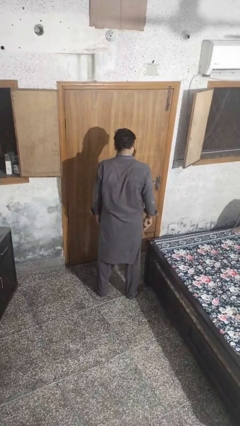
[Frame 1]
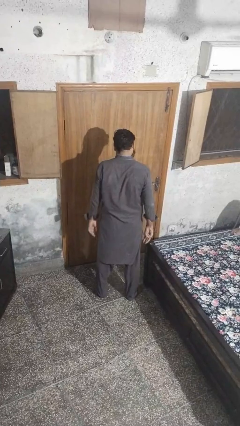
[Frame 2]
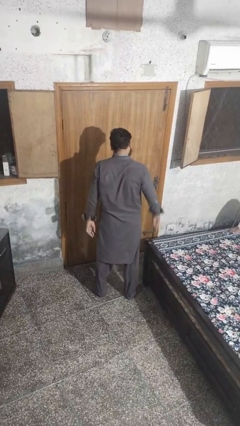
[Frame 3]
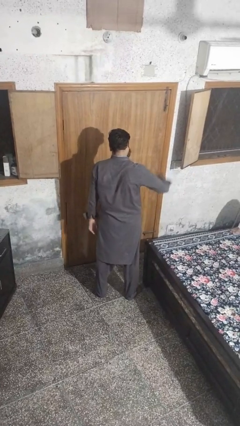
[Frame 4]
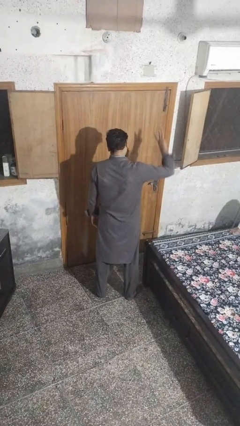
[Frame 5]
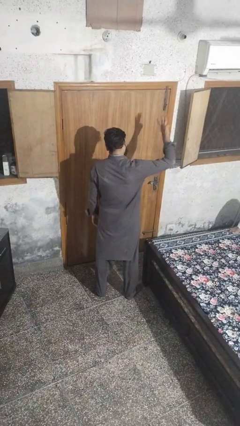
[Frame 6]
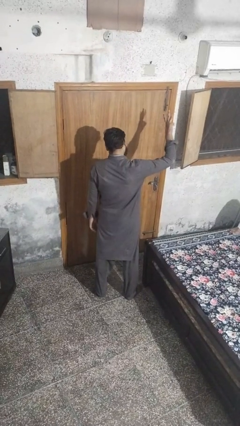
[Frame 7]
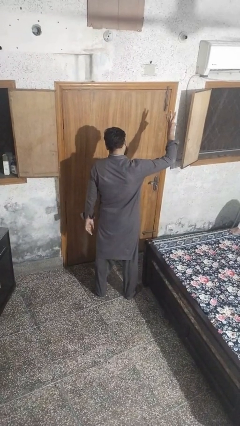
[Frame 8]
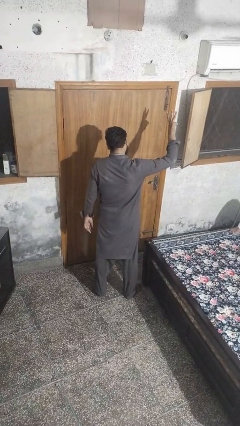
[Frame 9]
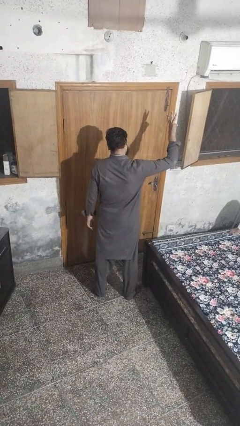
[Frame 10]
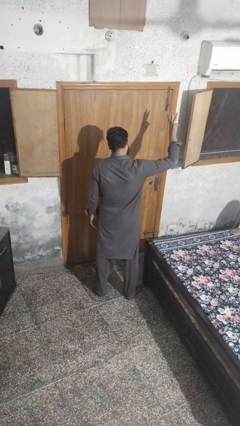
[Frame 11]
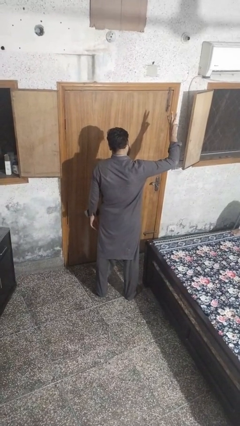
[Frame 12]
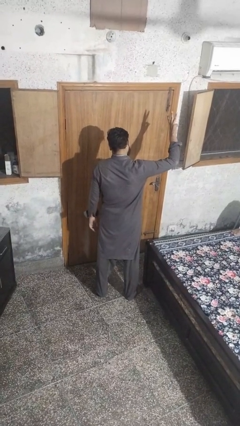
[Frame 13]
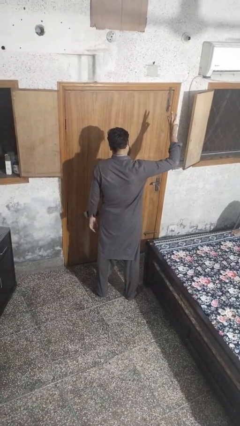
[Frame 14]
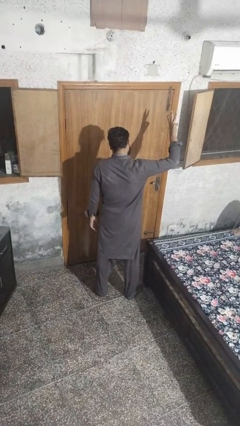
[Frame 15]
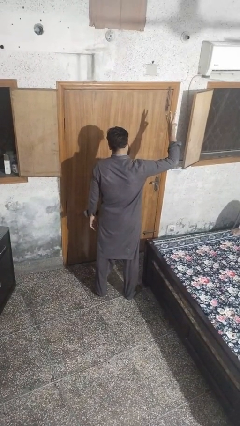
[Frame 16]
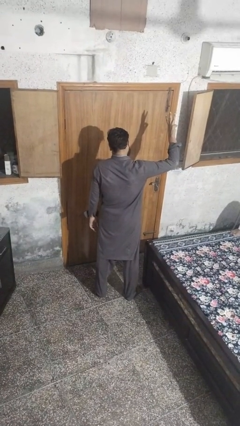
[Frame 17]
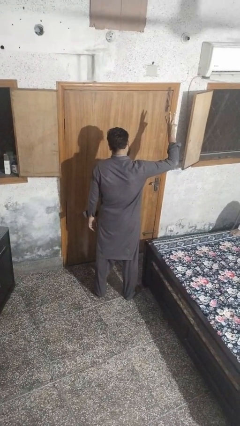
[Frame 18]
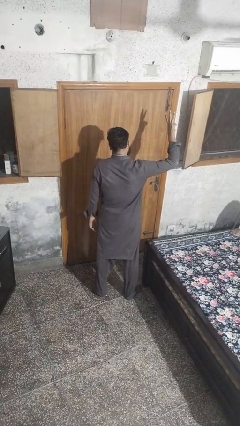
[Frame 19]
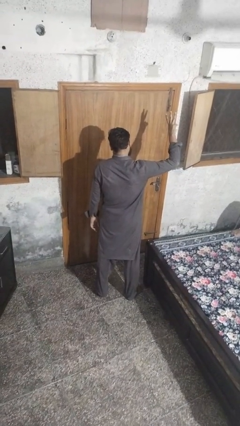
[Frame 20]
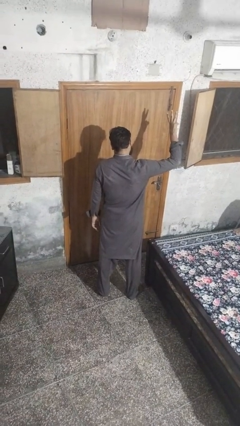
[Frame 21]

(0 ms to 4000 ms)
person gestures number three

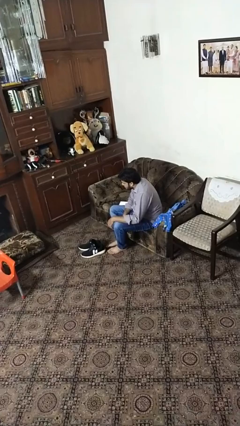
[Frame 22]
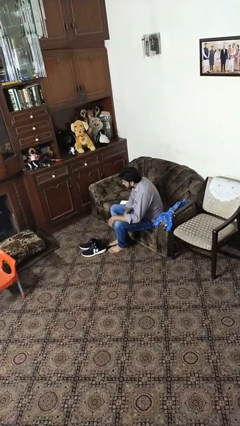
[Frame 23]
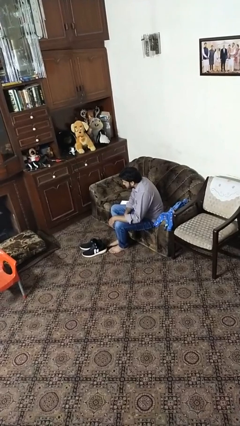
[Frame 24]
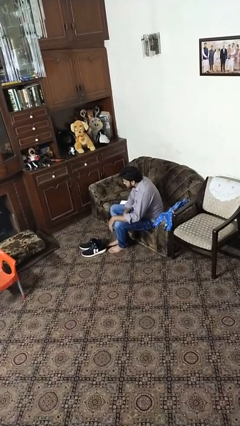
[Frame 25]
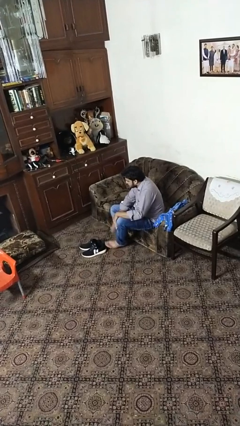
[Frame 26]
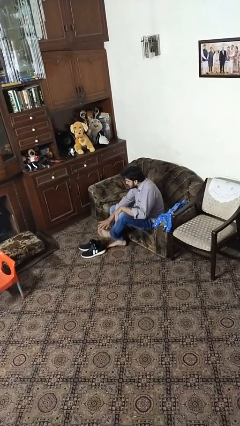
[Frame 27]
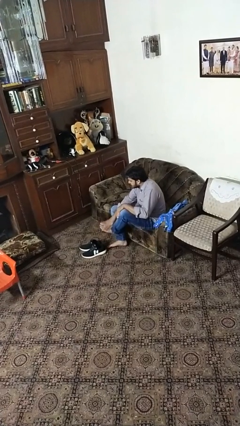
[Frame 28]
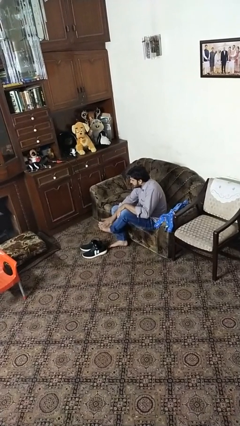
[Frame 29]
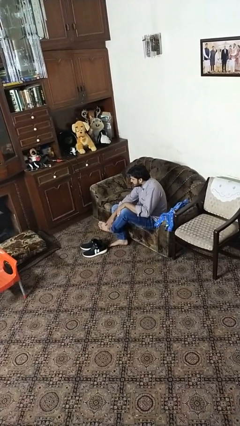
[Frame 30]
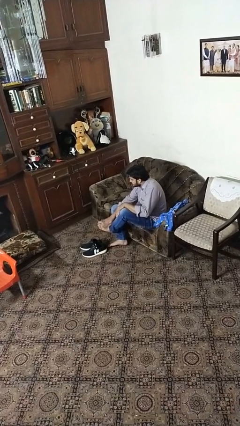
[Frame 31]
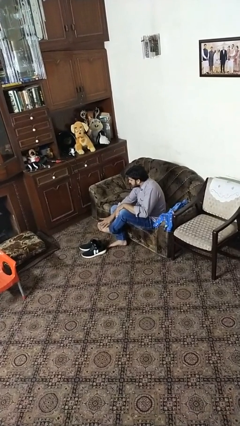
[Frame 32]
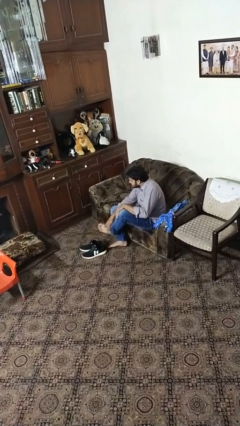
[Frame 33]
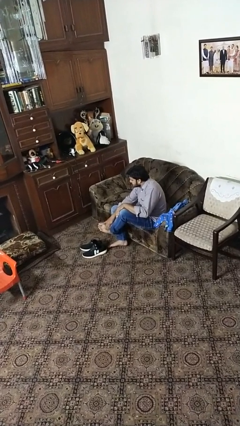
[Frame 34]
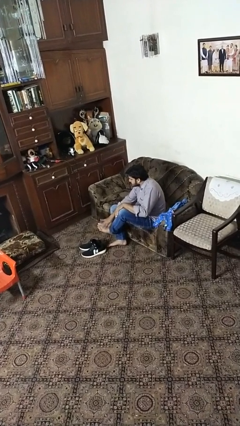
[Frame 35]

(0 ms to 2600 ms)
person rubs foot

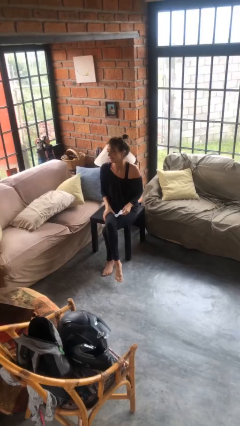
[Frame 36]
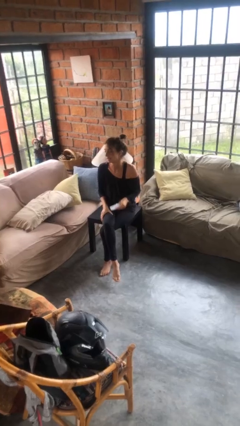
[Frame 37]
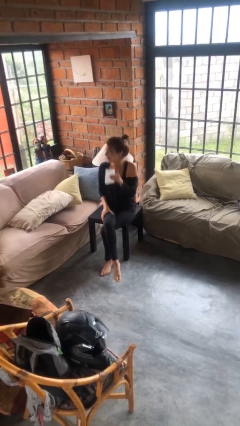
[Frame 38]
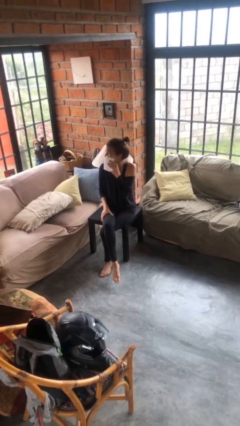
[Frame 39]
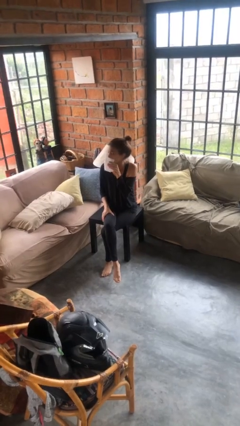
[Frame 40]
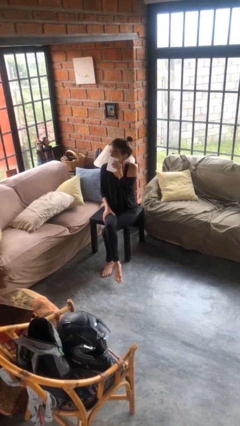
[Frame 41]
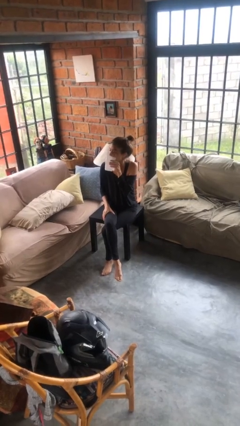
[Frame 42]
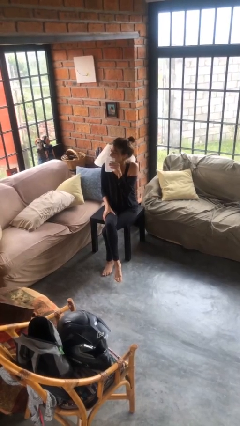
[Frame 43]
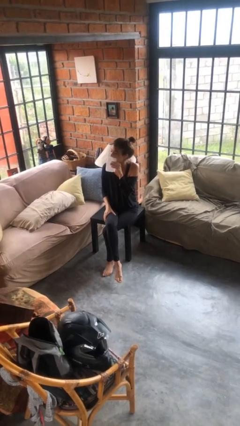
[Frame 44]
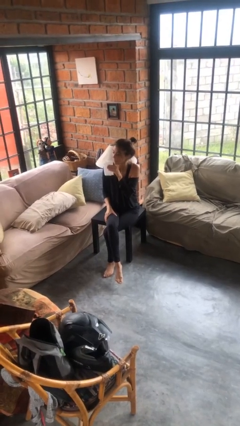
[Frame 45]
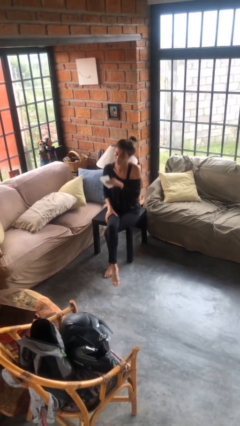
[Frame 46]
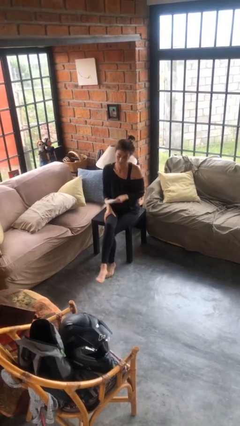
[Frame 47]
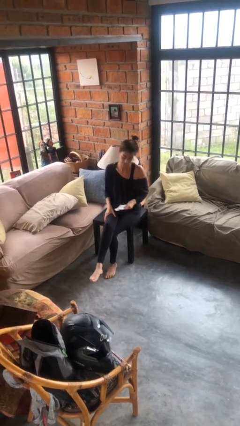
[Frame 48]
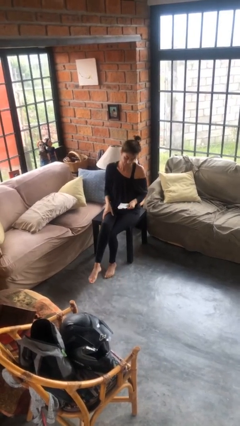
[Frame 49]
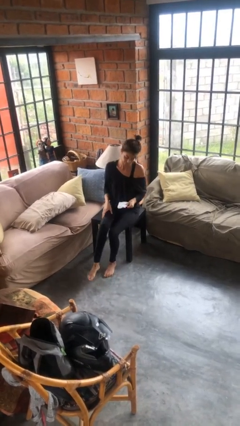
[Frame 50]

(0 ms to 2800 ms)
person wipes mouth with napkin

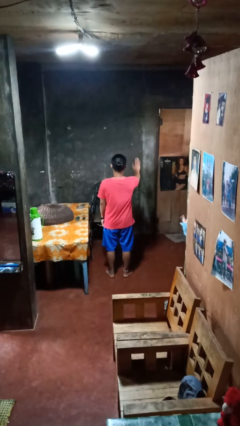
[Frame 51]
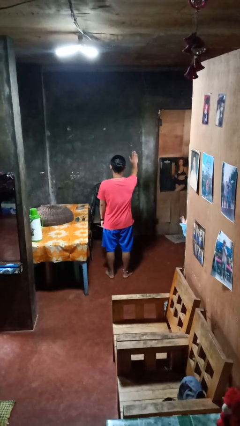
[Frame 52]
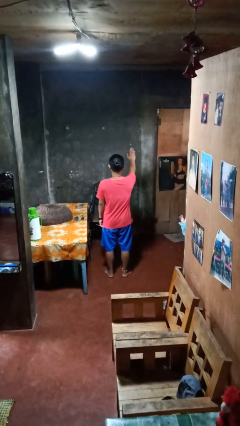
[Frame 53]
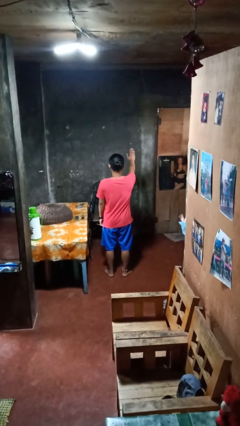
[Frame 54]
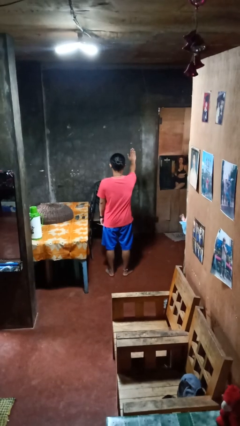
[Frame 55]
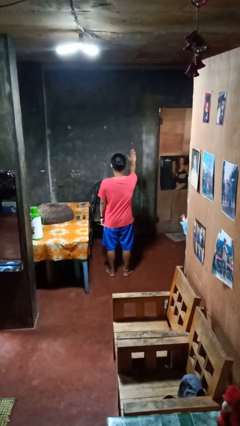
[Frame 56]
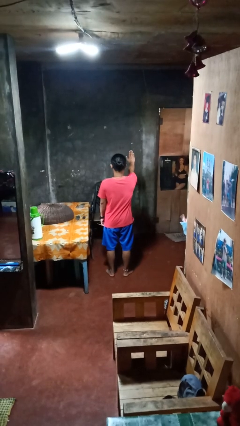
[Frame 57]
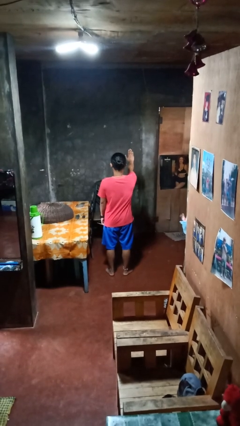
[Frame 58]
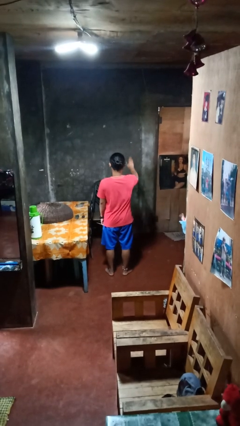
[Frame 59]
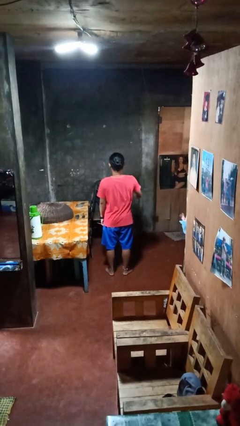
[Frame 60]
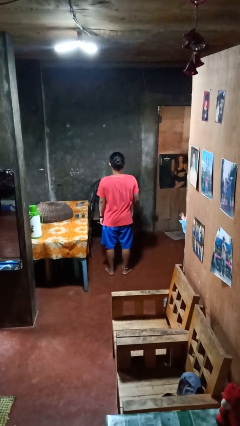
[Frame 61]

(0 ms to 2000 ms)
person gestures stop

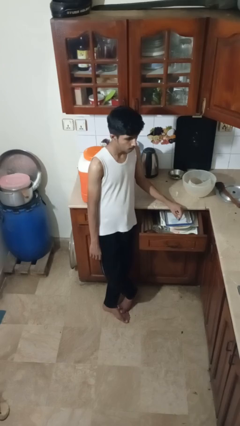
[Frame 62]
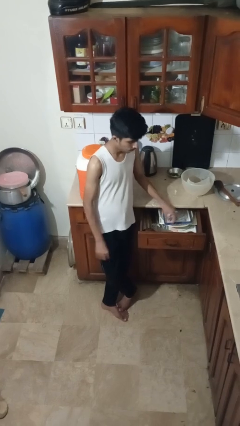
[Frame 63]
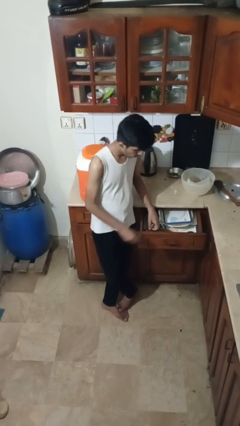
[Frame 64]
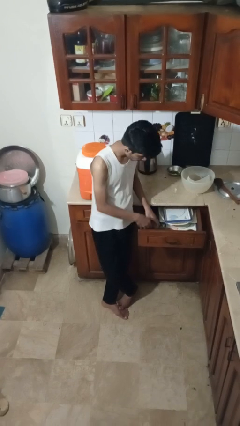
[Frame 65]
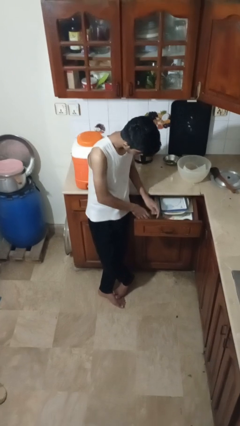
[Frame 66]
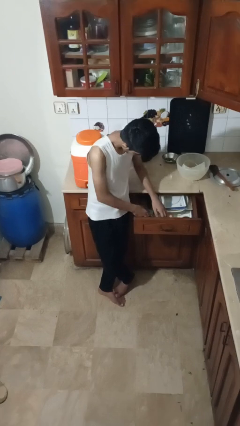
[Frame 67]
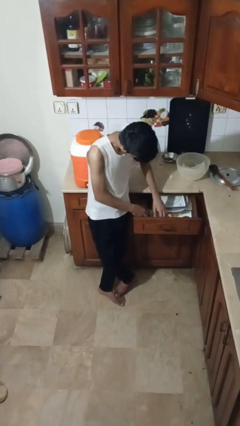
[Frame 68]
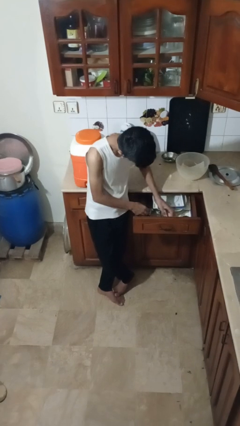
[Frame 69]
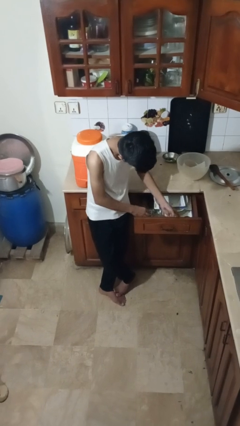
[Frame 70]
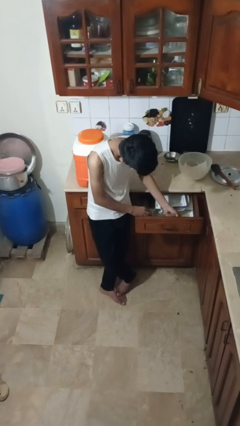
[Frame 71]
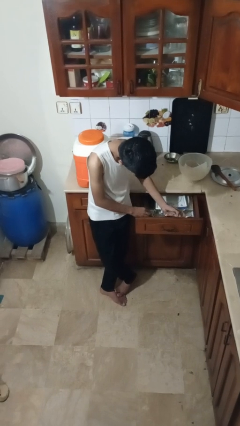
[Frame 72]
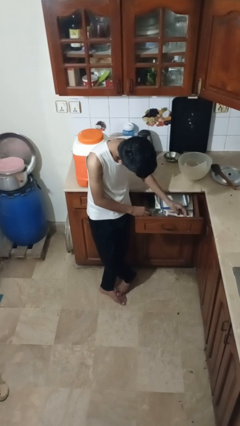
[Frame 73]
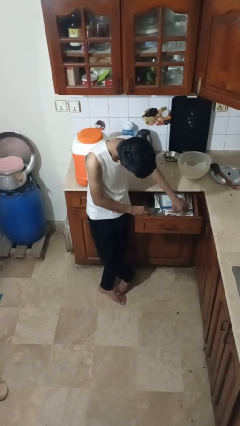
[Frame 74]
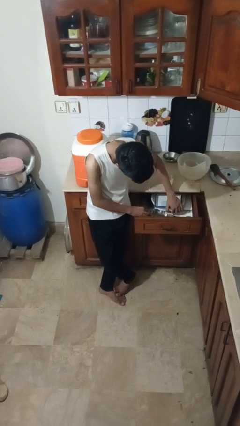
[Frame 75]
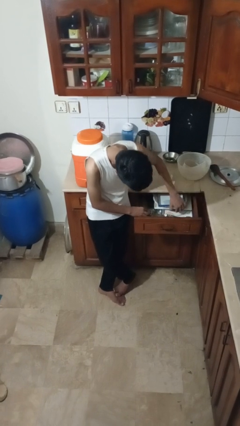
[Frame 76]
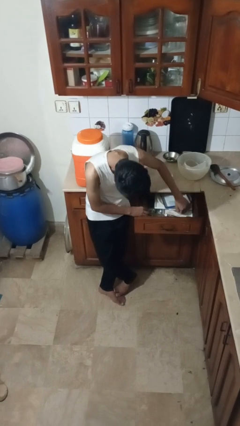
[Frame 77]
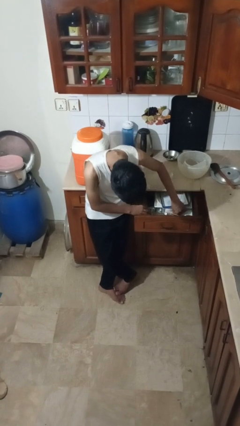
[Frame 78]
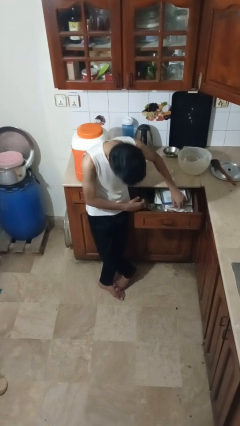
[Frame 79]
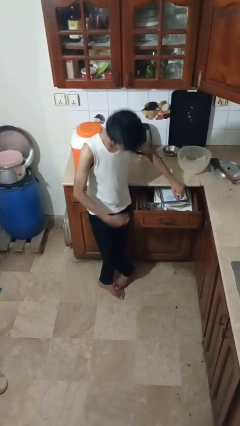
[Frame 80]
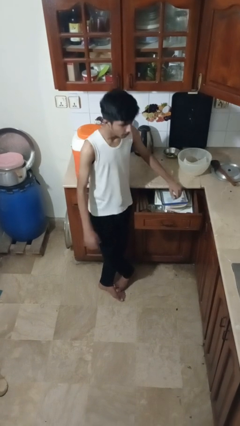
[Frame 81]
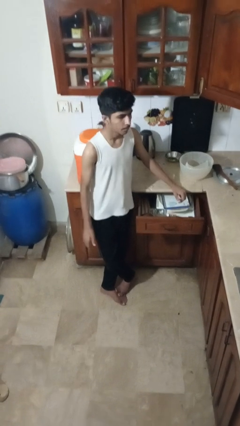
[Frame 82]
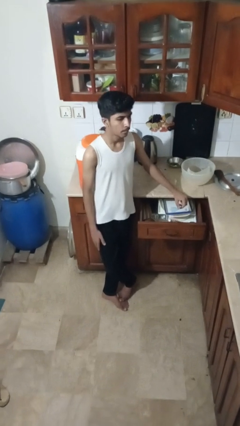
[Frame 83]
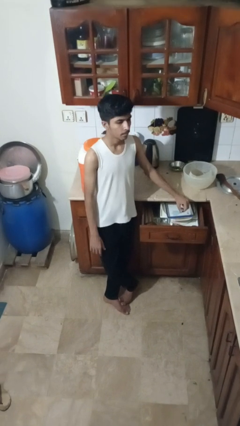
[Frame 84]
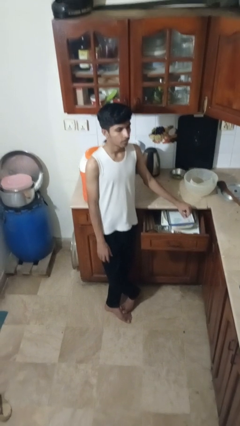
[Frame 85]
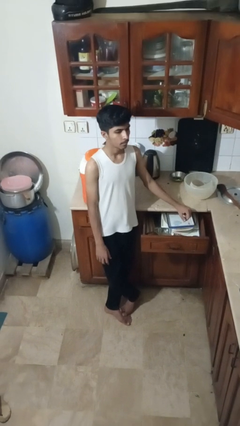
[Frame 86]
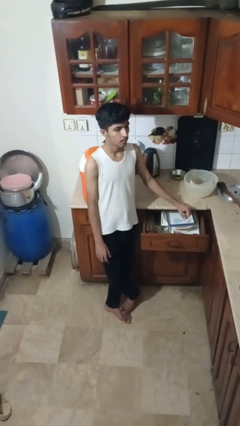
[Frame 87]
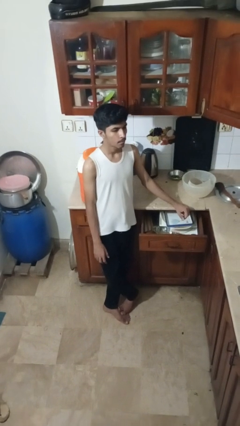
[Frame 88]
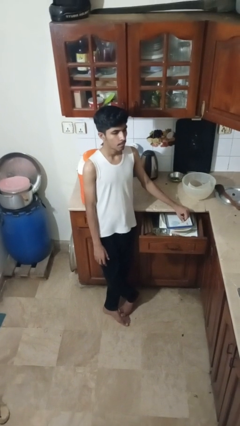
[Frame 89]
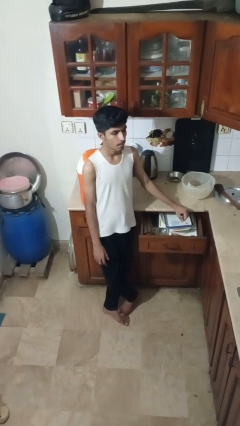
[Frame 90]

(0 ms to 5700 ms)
person searches in kitchen drawer

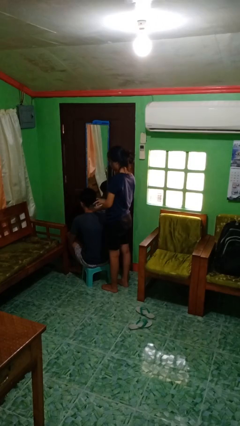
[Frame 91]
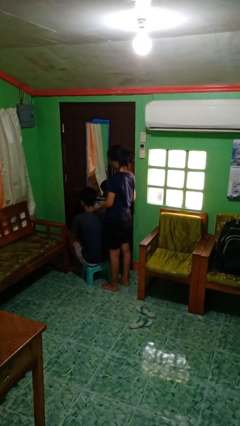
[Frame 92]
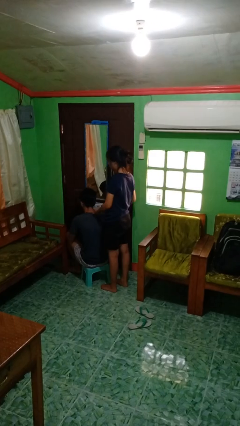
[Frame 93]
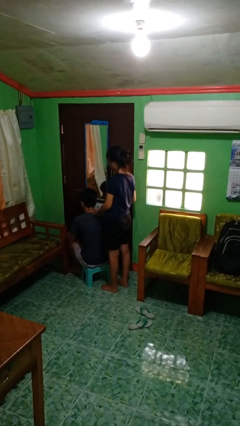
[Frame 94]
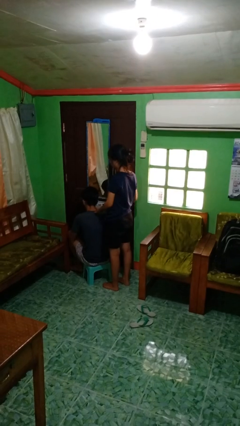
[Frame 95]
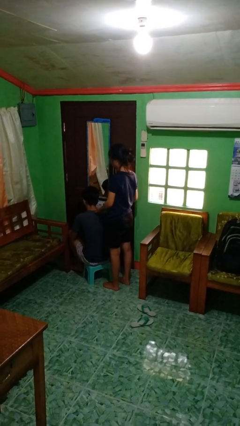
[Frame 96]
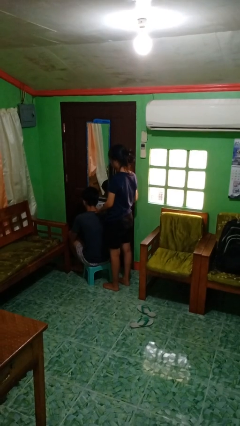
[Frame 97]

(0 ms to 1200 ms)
person brushes hair of person
